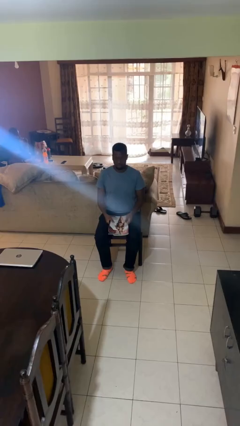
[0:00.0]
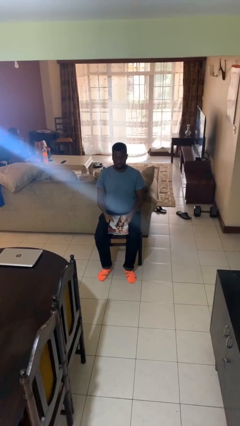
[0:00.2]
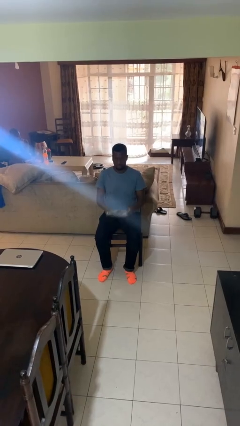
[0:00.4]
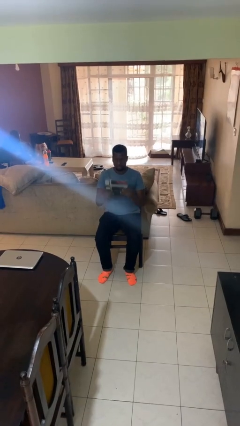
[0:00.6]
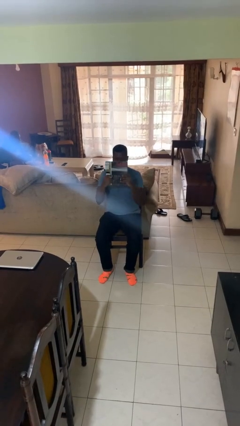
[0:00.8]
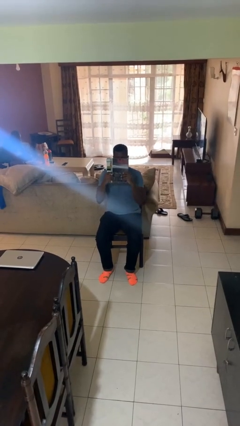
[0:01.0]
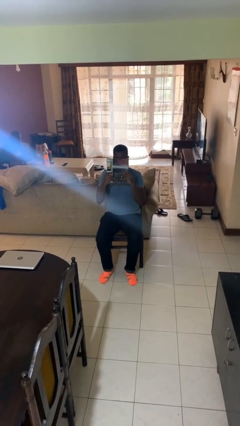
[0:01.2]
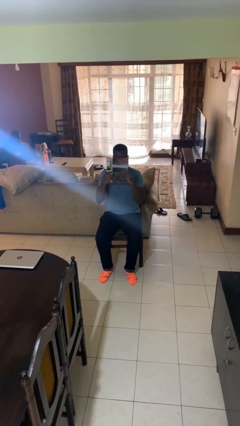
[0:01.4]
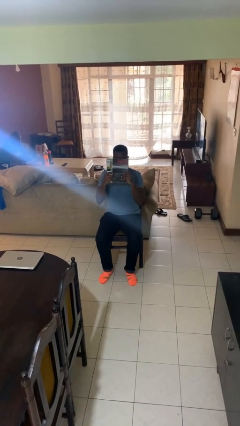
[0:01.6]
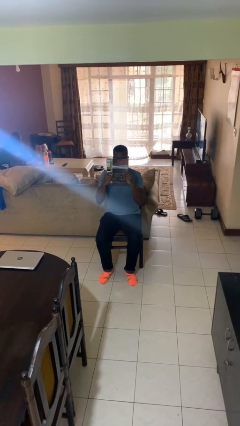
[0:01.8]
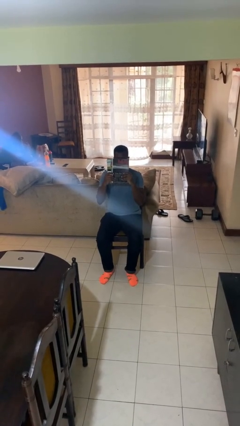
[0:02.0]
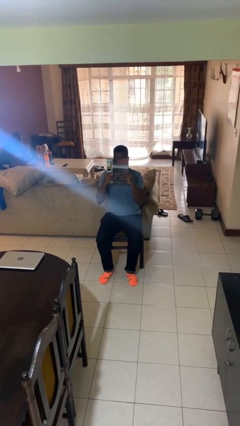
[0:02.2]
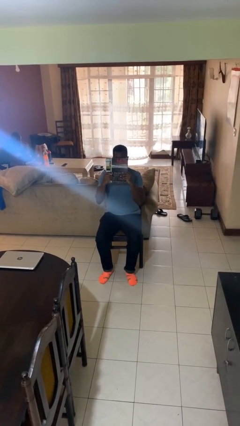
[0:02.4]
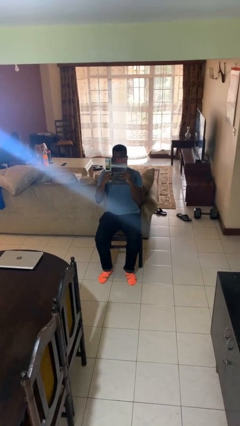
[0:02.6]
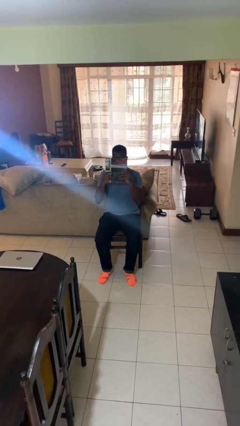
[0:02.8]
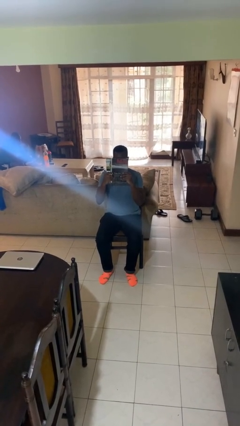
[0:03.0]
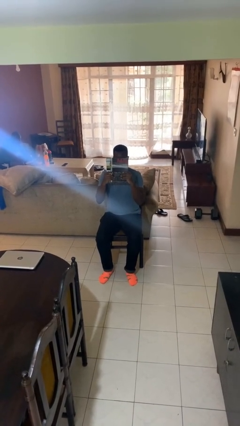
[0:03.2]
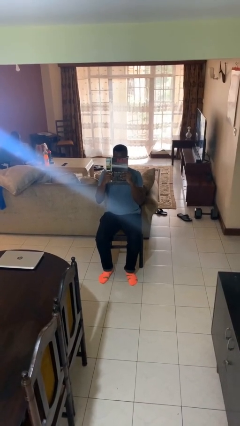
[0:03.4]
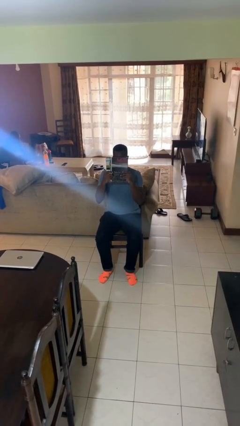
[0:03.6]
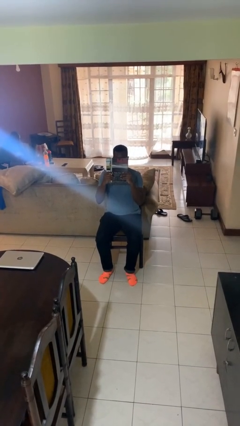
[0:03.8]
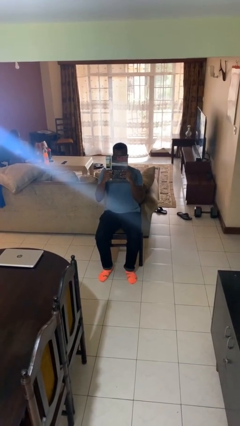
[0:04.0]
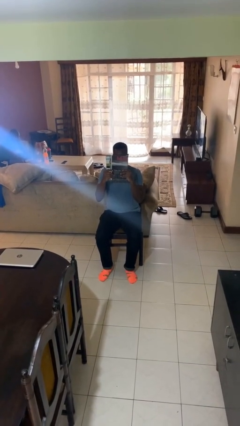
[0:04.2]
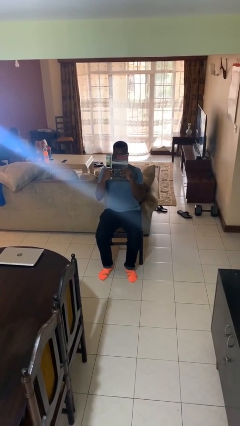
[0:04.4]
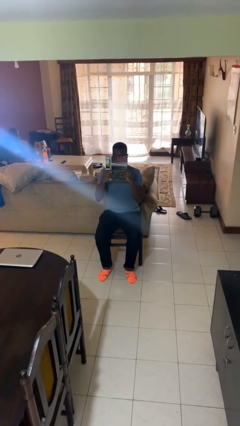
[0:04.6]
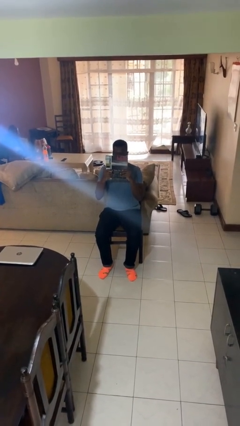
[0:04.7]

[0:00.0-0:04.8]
person reads document

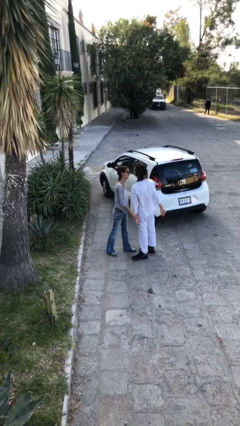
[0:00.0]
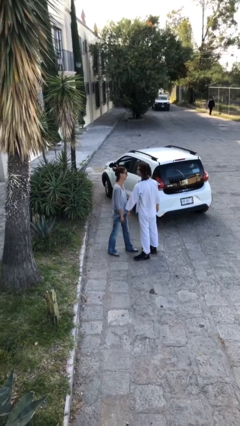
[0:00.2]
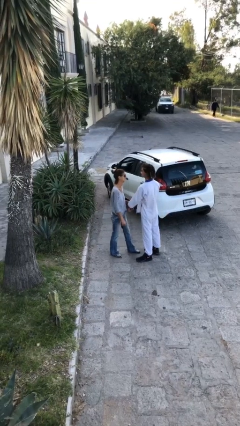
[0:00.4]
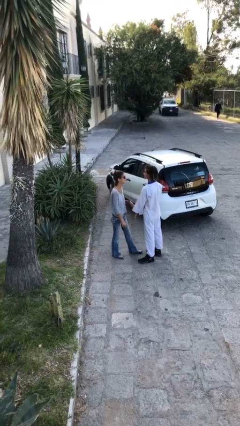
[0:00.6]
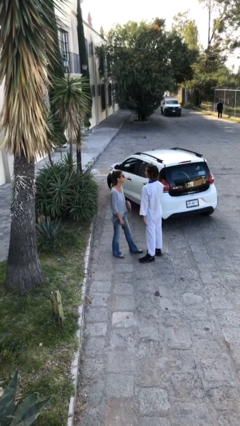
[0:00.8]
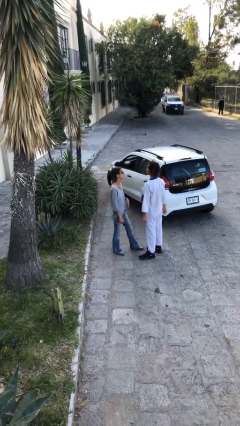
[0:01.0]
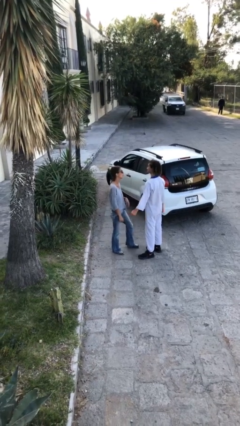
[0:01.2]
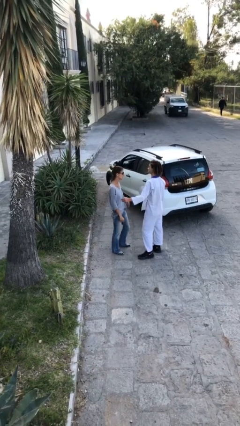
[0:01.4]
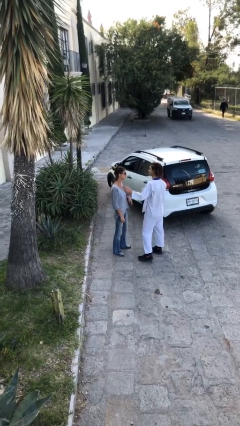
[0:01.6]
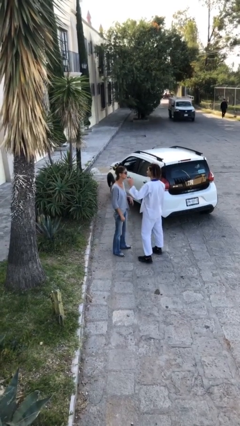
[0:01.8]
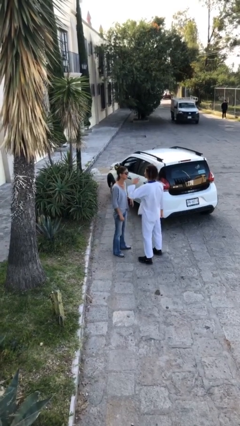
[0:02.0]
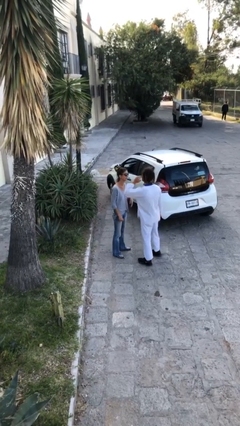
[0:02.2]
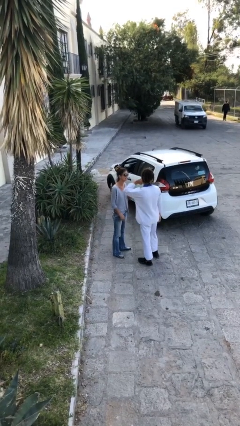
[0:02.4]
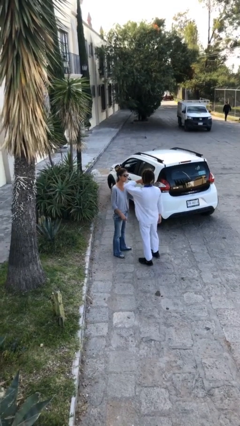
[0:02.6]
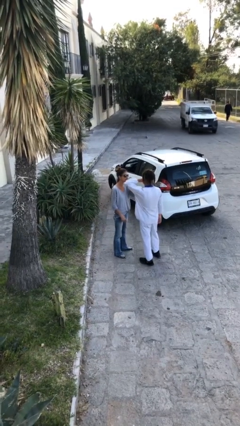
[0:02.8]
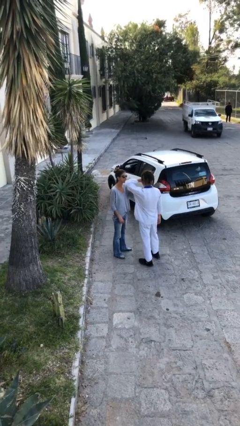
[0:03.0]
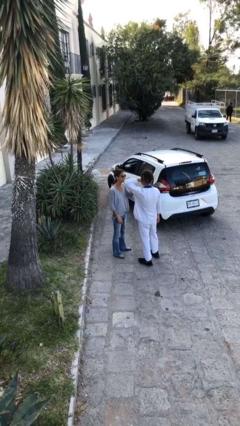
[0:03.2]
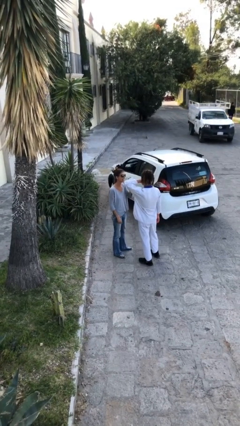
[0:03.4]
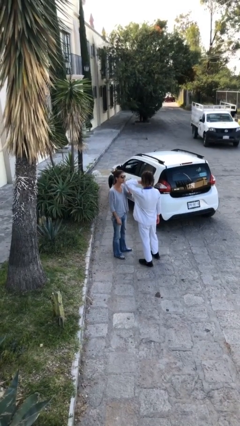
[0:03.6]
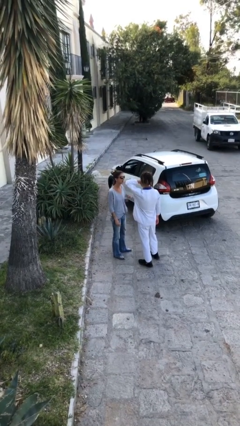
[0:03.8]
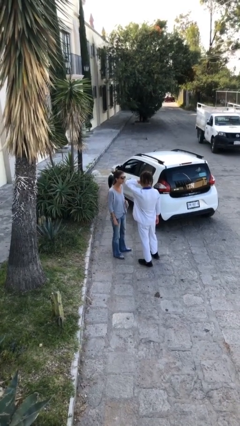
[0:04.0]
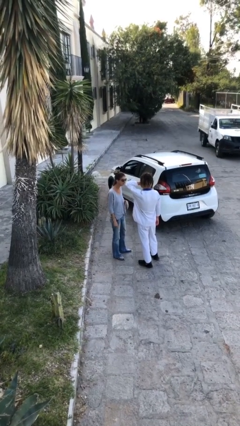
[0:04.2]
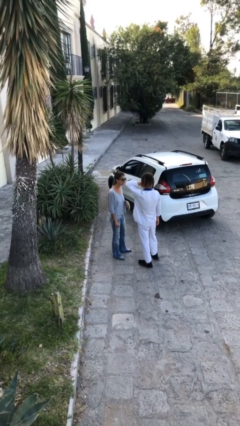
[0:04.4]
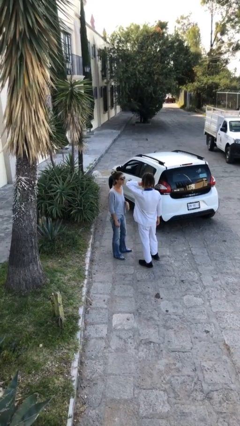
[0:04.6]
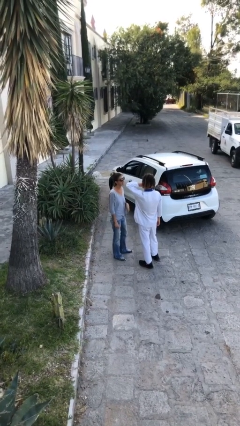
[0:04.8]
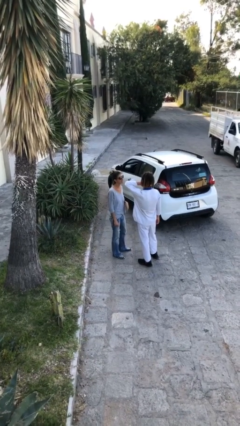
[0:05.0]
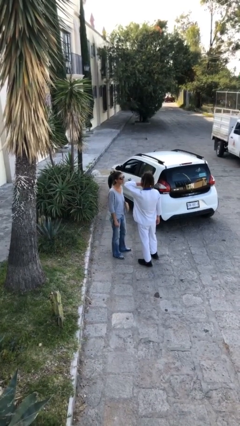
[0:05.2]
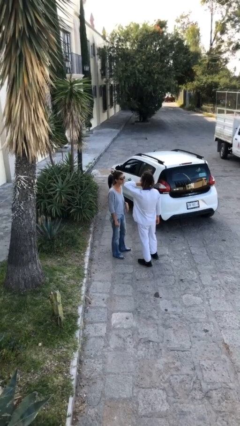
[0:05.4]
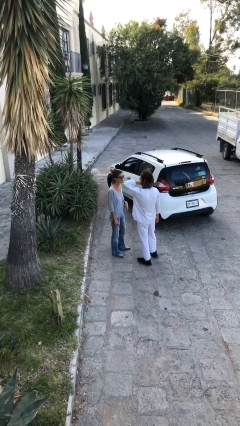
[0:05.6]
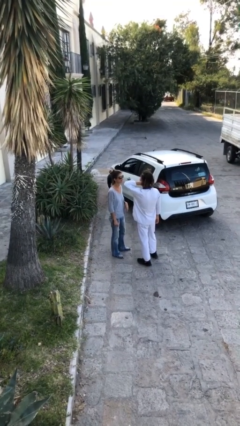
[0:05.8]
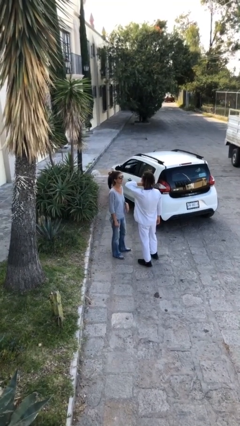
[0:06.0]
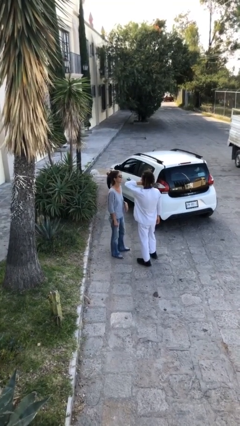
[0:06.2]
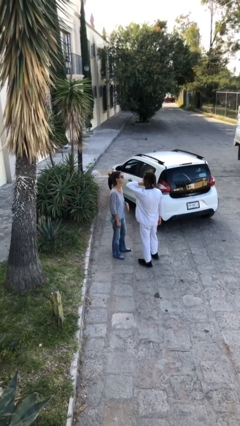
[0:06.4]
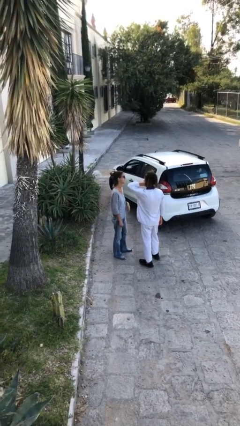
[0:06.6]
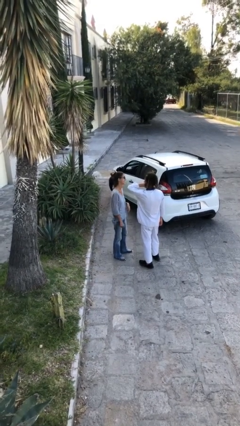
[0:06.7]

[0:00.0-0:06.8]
person talks to person

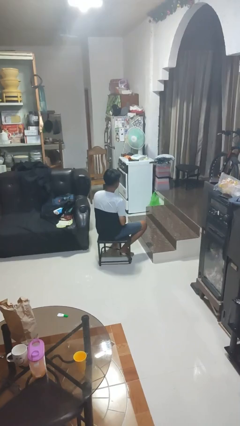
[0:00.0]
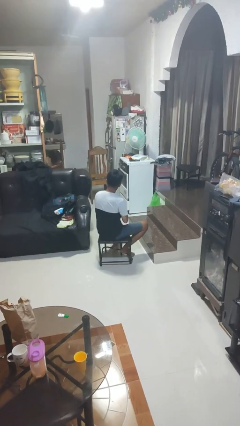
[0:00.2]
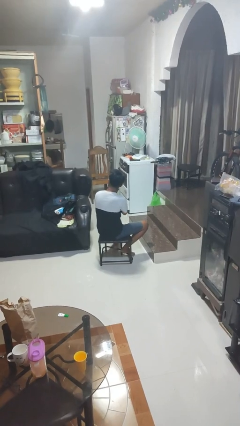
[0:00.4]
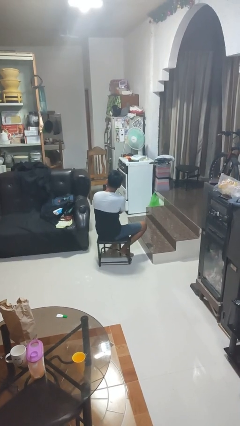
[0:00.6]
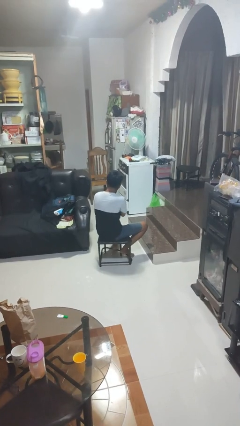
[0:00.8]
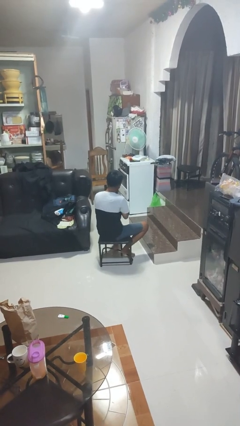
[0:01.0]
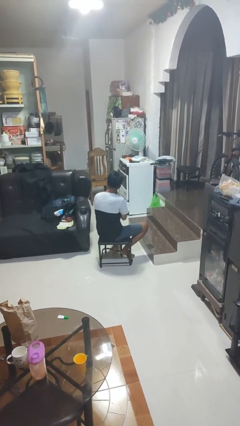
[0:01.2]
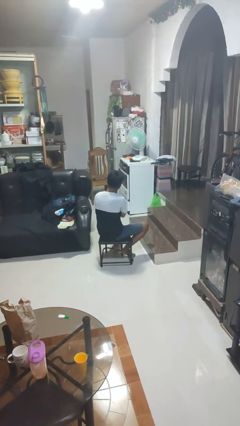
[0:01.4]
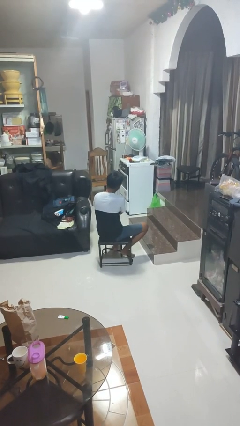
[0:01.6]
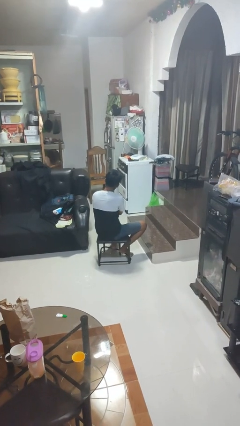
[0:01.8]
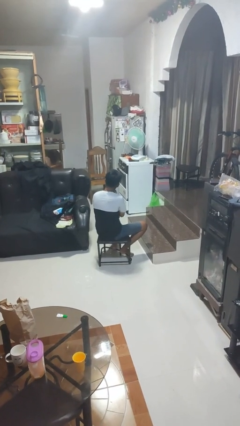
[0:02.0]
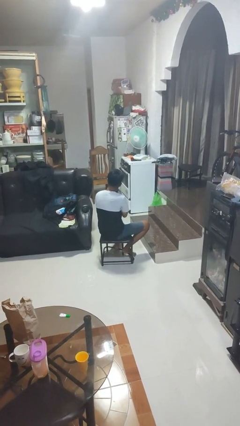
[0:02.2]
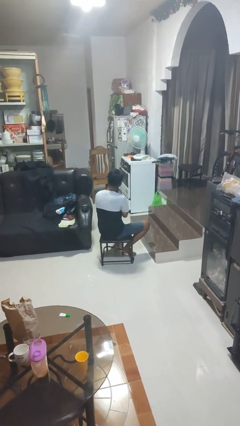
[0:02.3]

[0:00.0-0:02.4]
person strokes chin

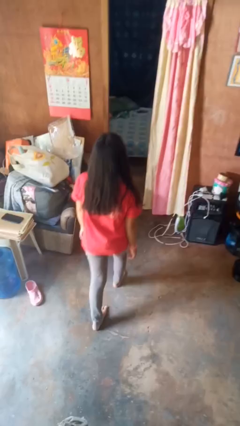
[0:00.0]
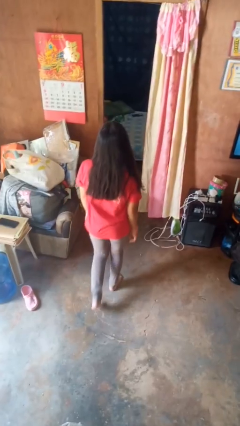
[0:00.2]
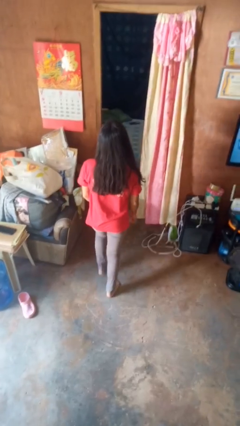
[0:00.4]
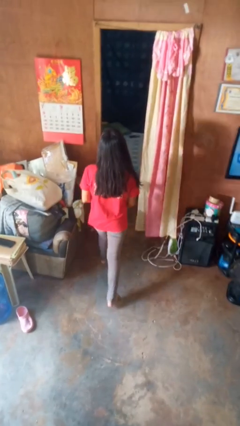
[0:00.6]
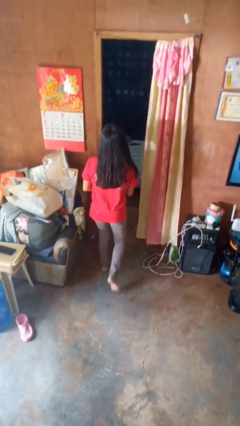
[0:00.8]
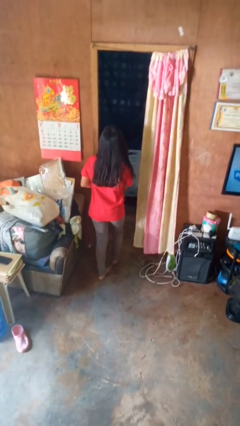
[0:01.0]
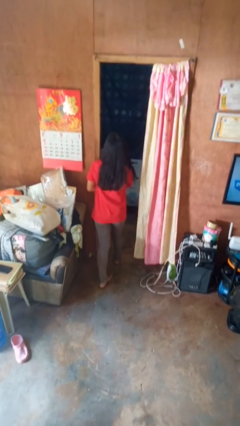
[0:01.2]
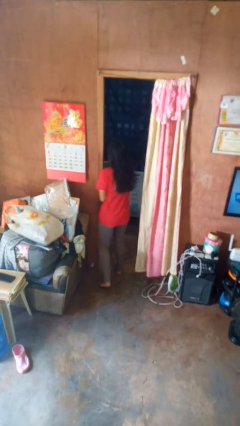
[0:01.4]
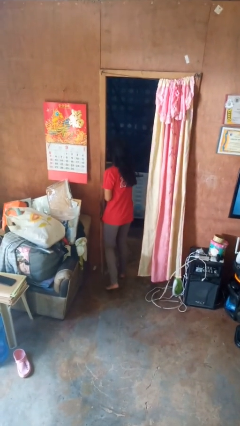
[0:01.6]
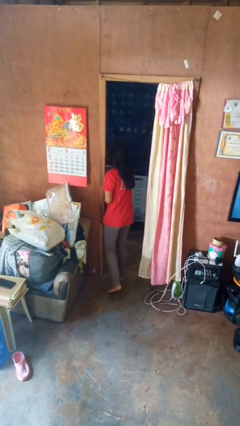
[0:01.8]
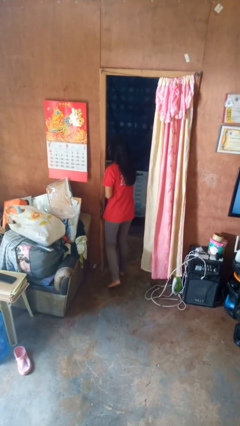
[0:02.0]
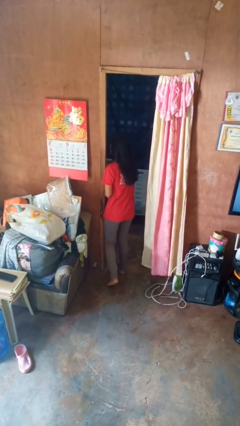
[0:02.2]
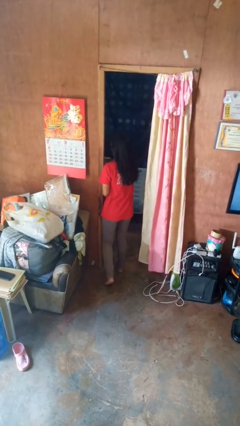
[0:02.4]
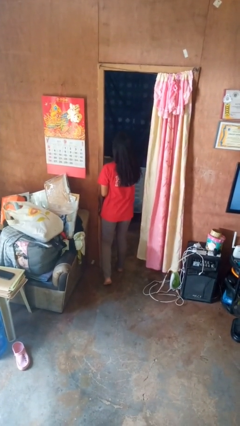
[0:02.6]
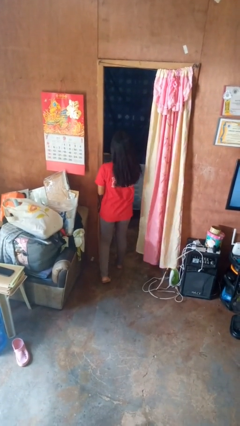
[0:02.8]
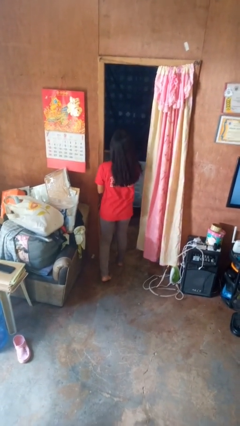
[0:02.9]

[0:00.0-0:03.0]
person bumps into wall

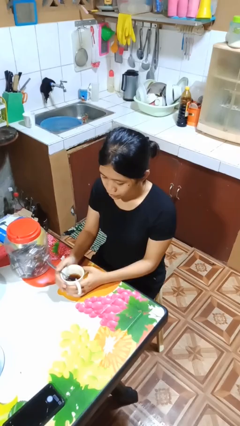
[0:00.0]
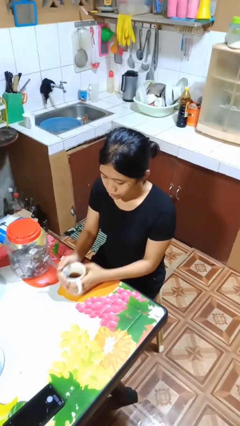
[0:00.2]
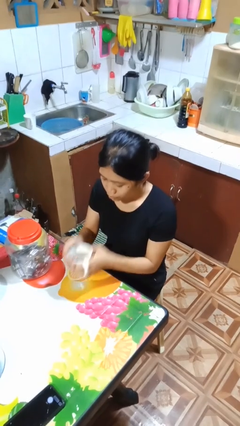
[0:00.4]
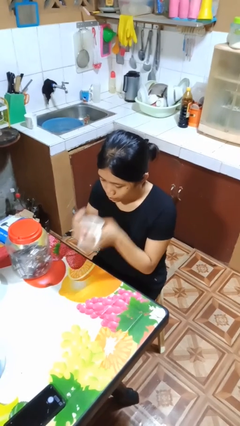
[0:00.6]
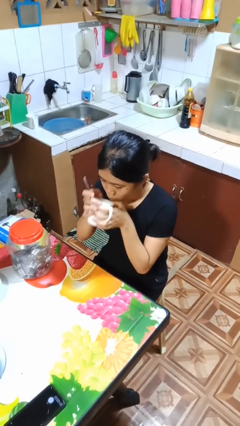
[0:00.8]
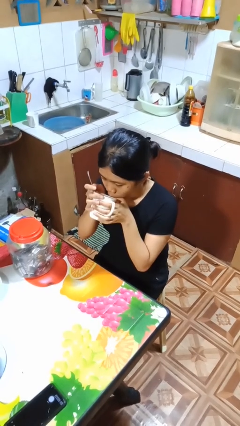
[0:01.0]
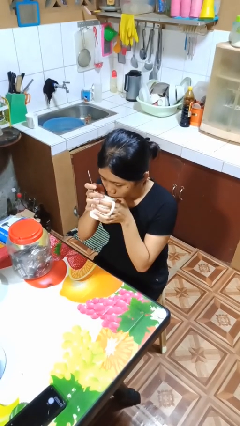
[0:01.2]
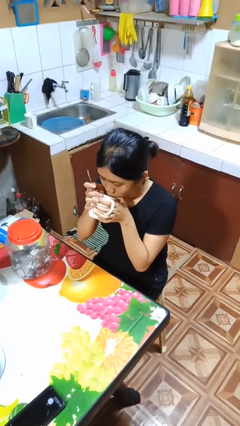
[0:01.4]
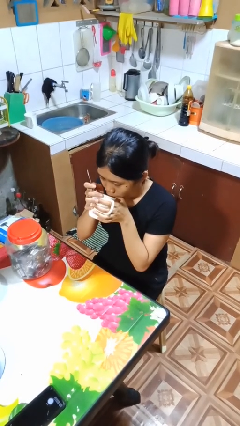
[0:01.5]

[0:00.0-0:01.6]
person drinks from mug
